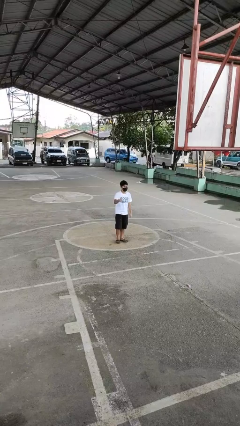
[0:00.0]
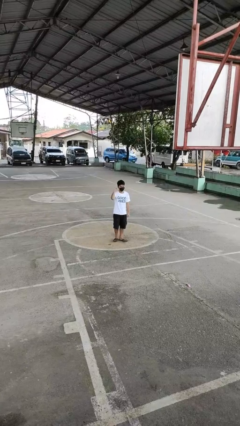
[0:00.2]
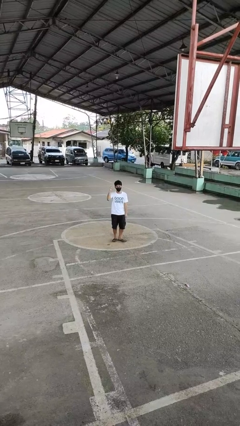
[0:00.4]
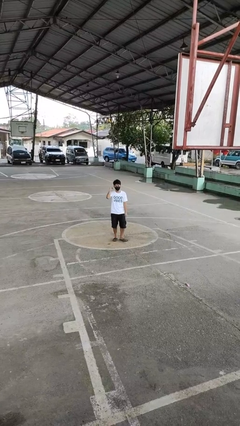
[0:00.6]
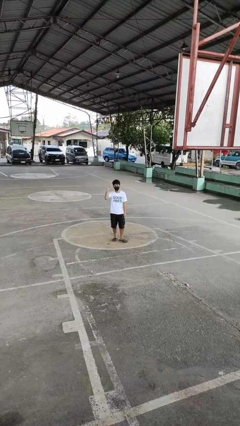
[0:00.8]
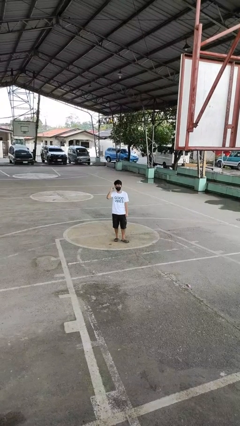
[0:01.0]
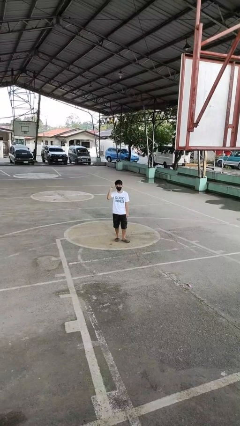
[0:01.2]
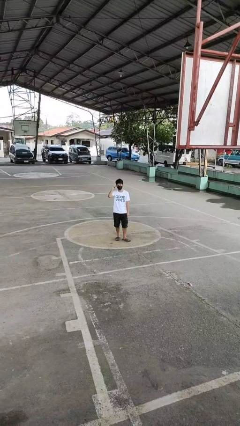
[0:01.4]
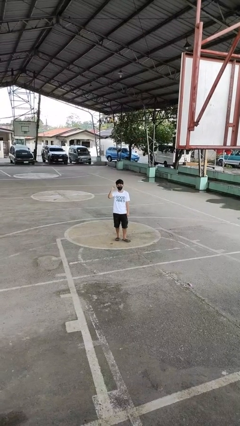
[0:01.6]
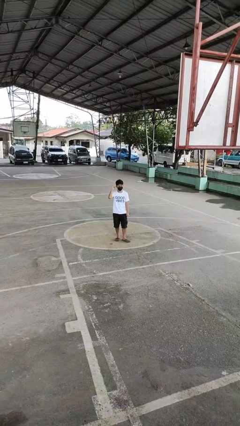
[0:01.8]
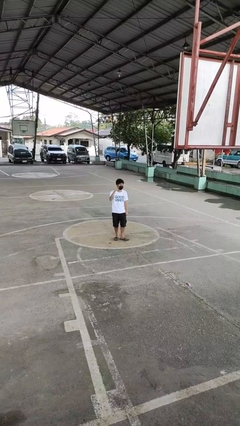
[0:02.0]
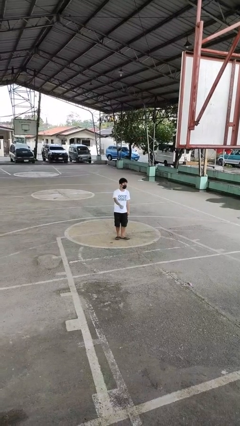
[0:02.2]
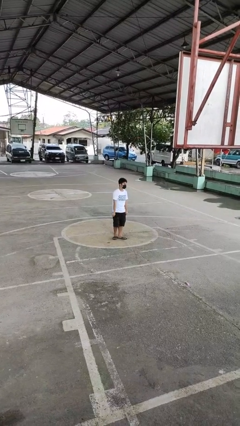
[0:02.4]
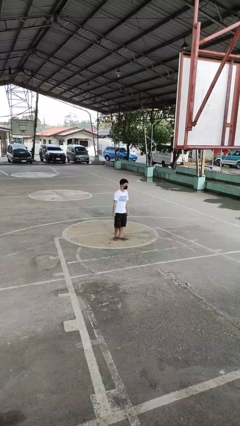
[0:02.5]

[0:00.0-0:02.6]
person gestures behind me

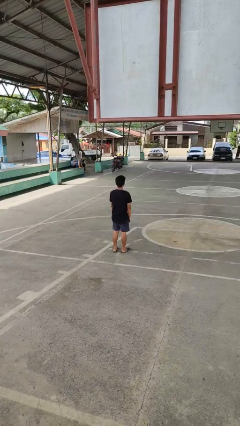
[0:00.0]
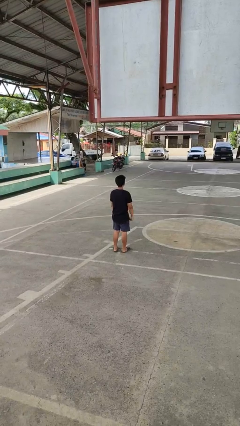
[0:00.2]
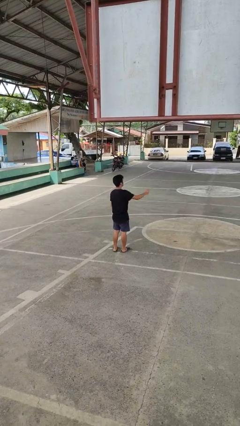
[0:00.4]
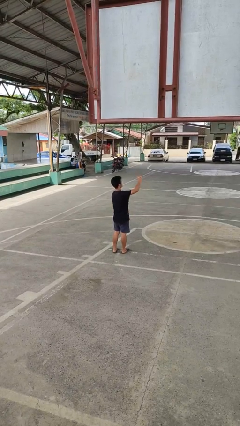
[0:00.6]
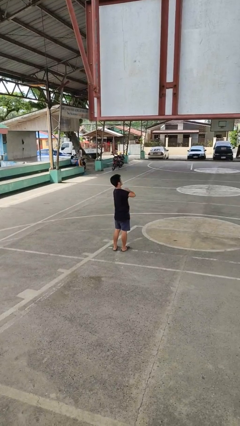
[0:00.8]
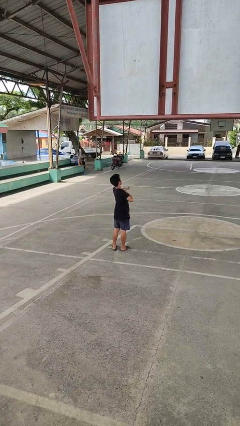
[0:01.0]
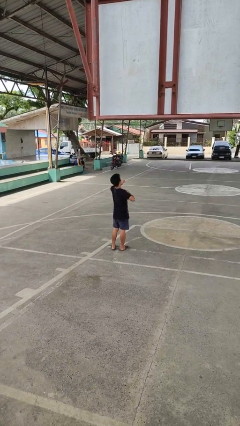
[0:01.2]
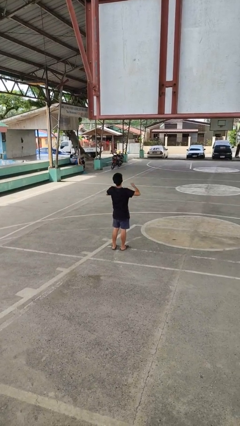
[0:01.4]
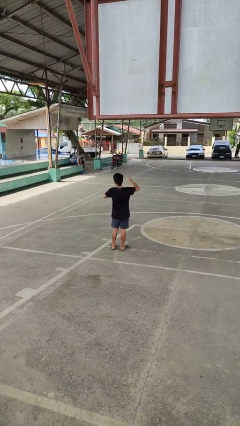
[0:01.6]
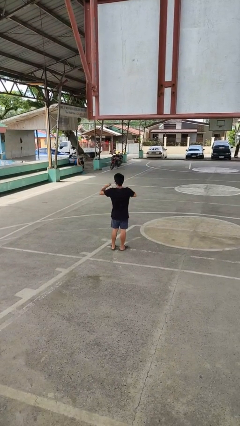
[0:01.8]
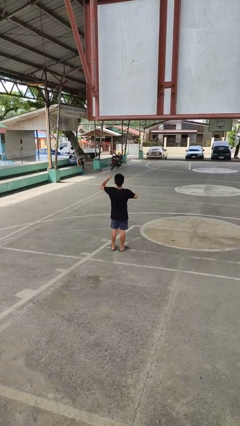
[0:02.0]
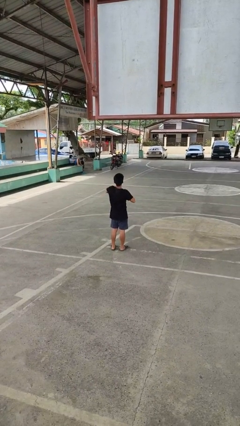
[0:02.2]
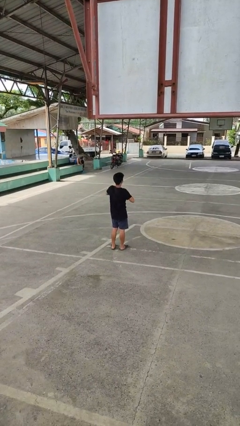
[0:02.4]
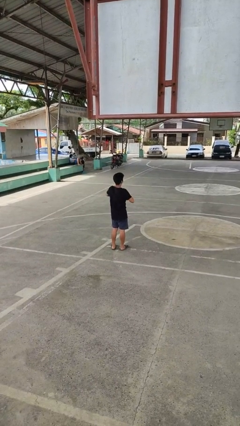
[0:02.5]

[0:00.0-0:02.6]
person drums on chest

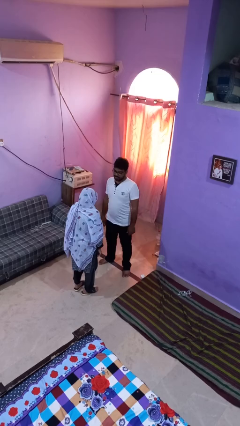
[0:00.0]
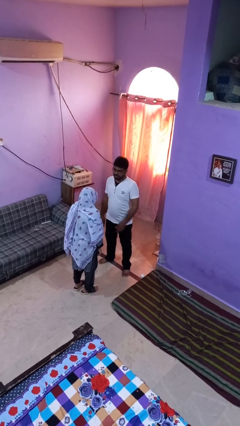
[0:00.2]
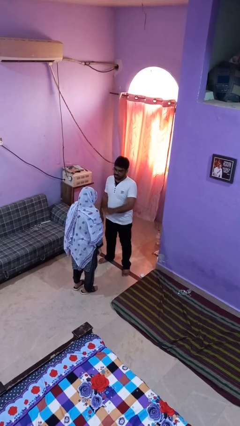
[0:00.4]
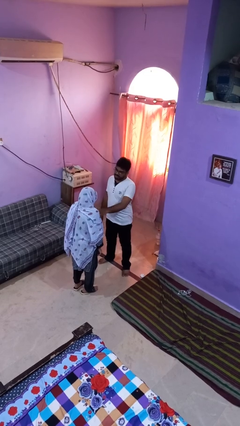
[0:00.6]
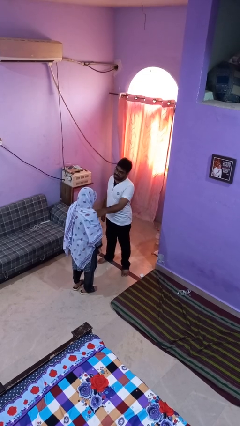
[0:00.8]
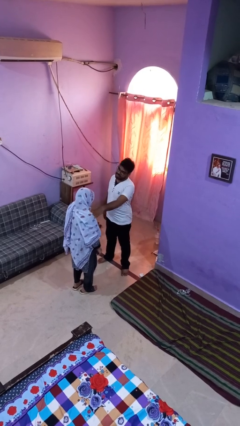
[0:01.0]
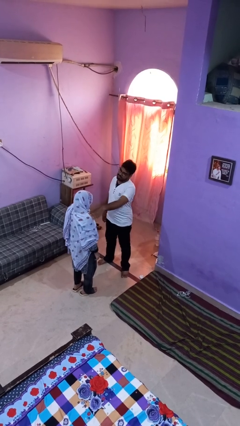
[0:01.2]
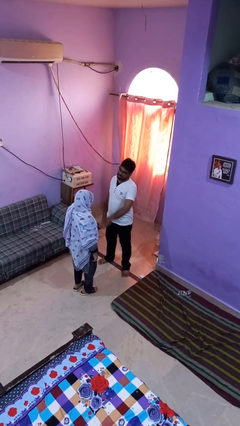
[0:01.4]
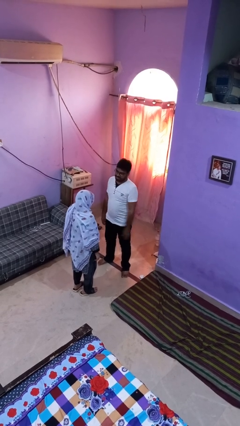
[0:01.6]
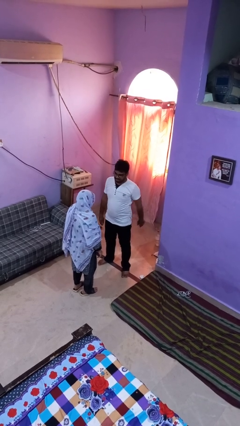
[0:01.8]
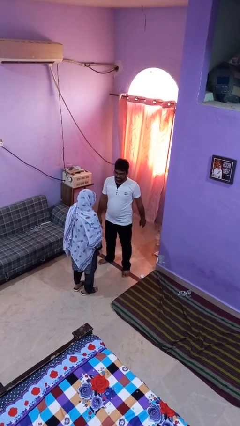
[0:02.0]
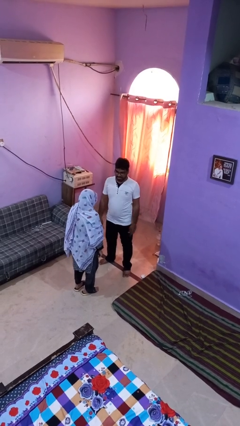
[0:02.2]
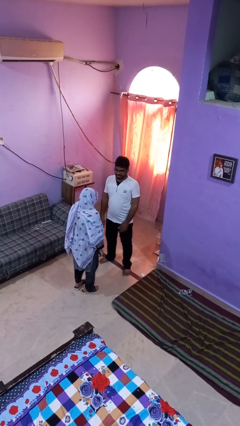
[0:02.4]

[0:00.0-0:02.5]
person shoves person

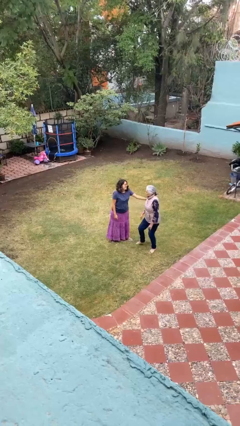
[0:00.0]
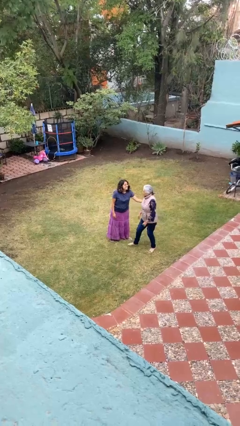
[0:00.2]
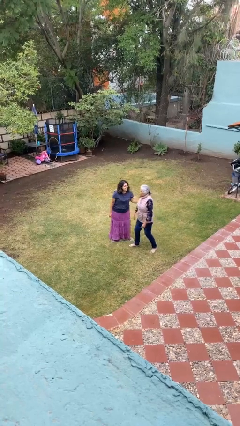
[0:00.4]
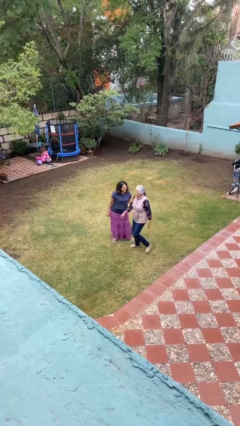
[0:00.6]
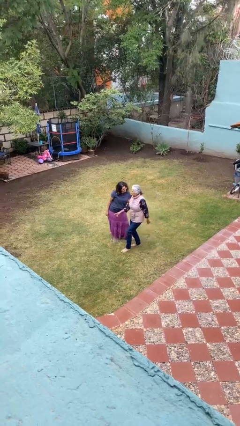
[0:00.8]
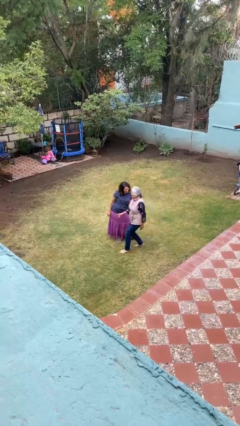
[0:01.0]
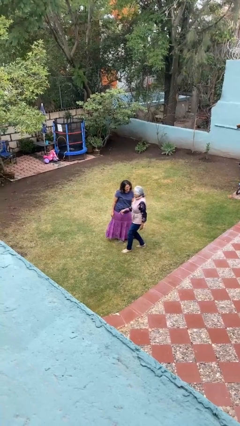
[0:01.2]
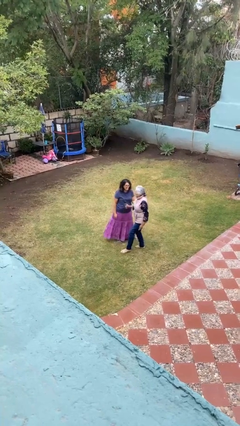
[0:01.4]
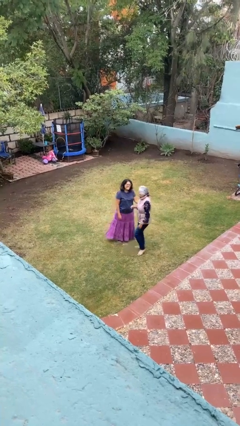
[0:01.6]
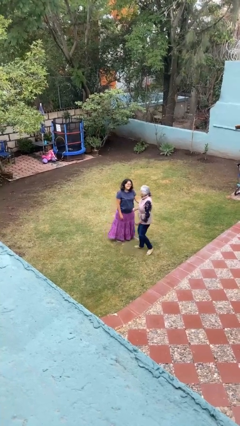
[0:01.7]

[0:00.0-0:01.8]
person grabs person by bicep

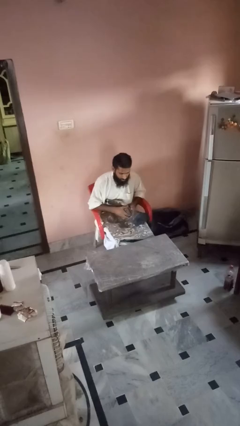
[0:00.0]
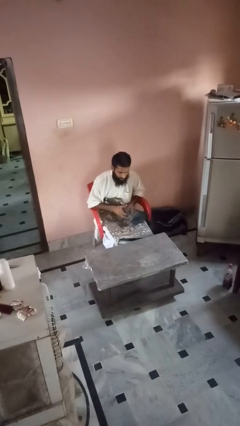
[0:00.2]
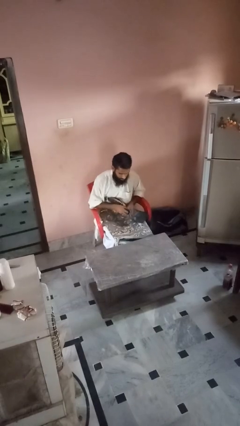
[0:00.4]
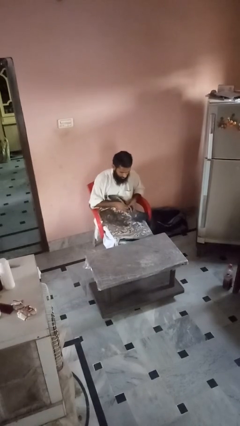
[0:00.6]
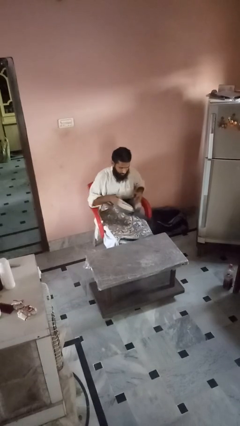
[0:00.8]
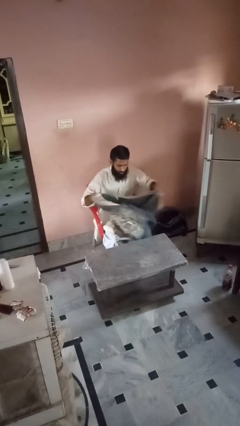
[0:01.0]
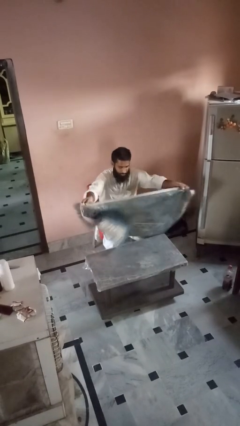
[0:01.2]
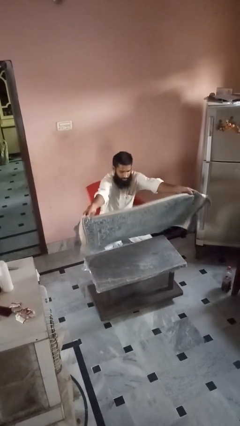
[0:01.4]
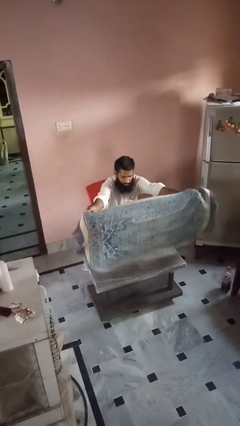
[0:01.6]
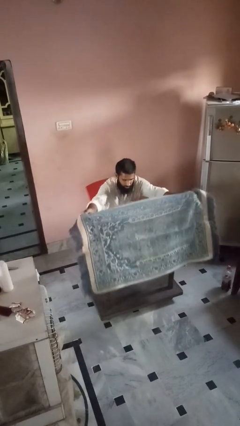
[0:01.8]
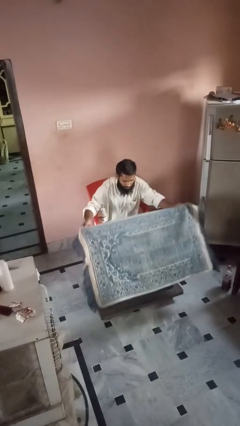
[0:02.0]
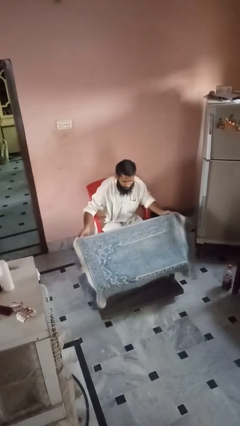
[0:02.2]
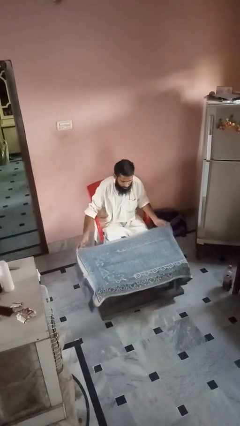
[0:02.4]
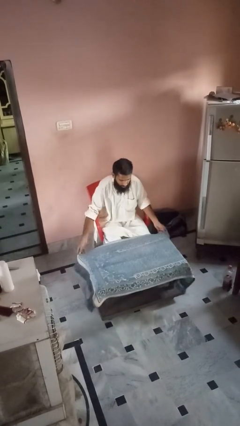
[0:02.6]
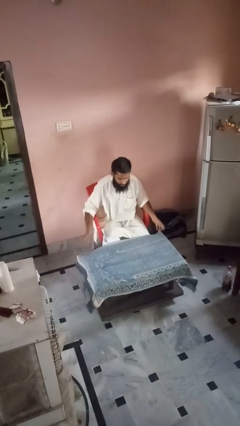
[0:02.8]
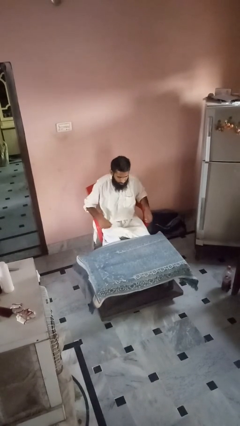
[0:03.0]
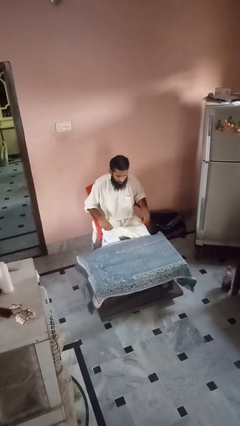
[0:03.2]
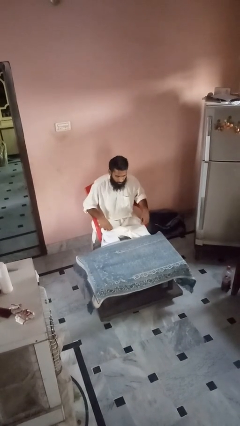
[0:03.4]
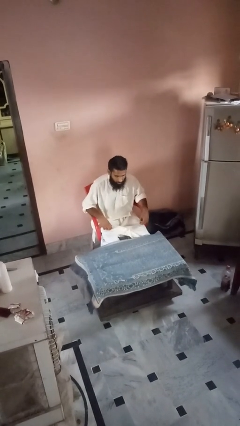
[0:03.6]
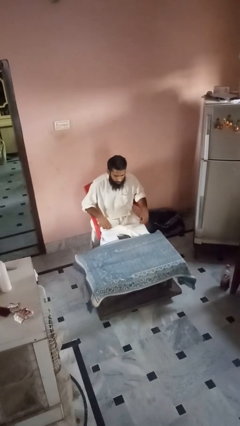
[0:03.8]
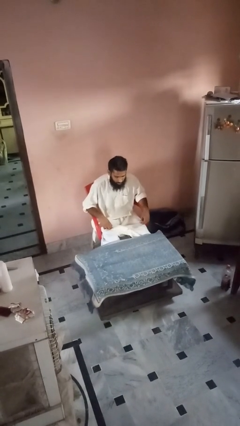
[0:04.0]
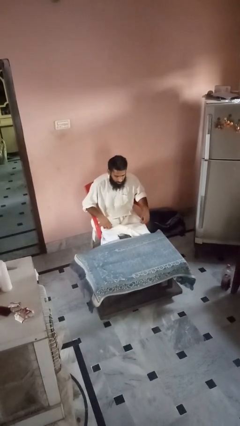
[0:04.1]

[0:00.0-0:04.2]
person spreads tablecloth

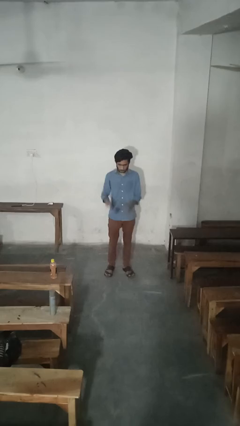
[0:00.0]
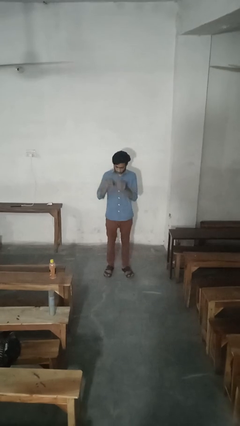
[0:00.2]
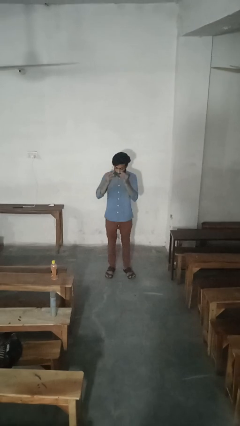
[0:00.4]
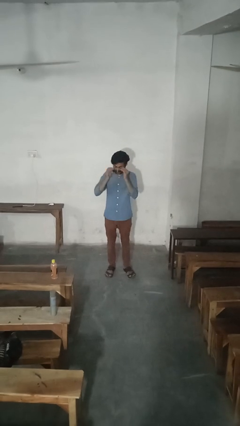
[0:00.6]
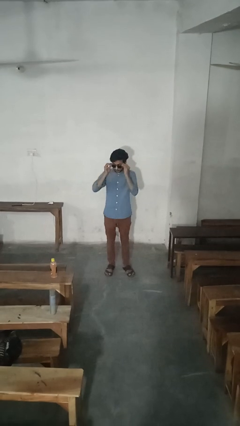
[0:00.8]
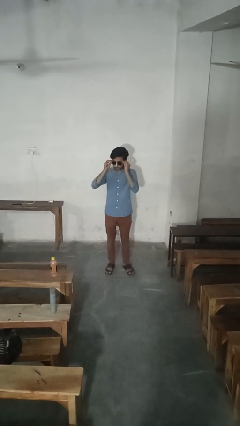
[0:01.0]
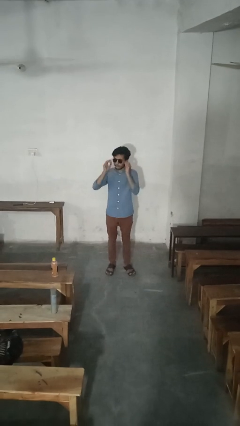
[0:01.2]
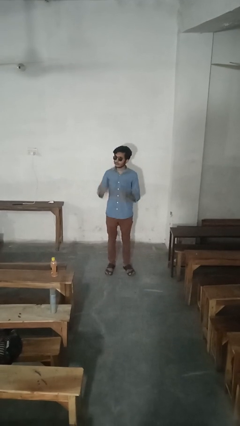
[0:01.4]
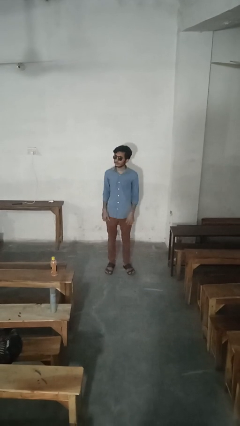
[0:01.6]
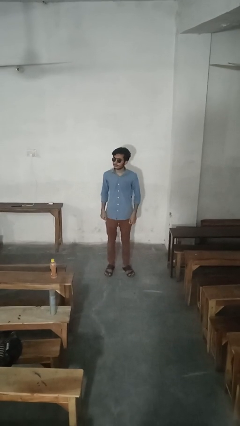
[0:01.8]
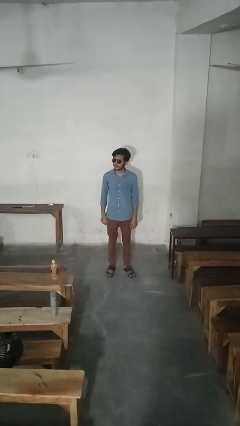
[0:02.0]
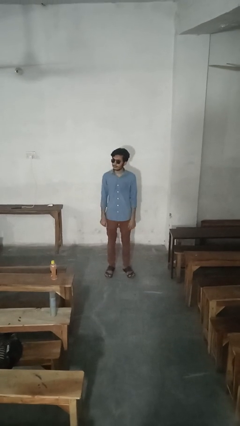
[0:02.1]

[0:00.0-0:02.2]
person puts on sunglasses

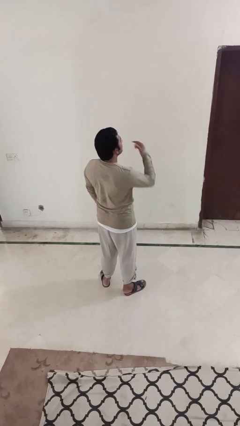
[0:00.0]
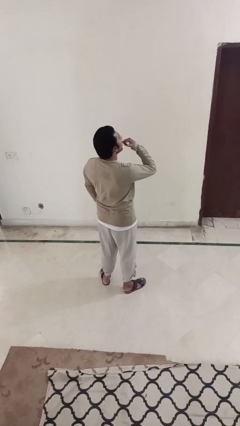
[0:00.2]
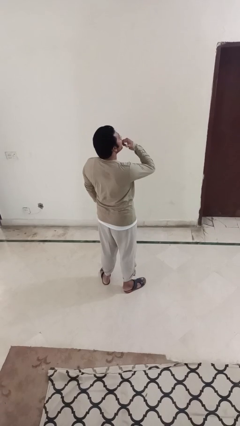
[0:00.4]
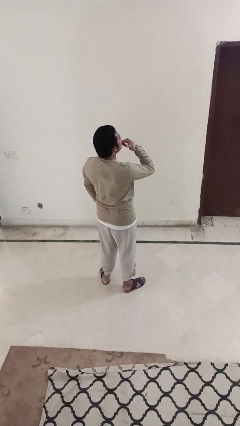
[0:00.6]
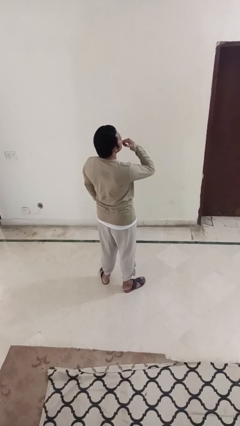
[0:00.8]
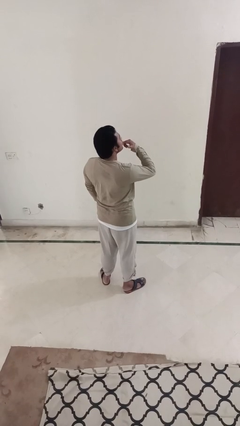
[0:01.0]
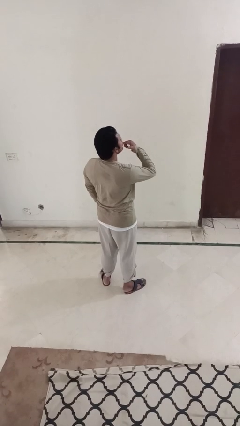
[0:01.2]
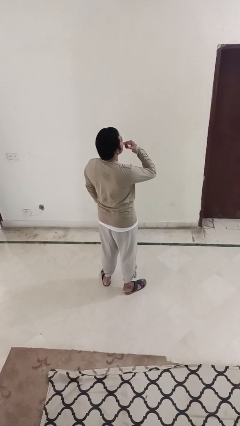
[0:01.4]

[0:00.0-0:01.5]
person licks fingers
